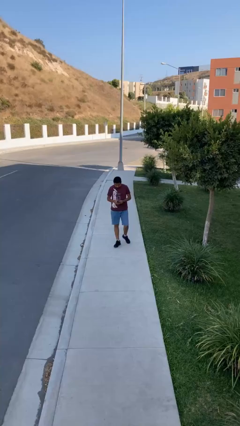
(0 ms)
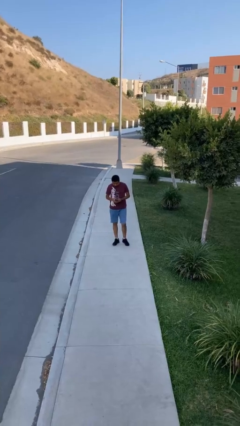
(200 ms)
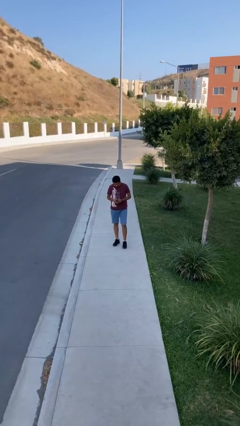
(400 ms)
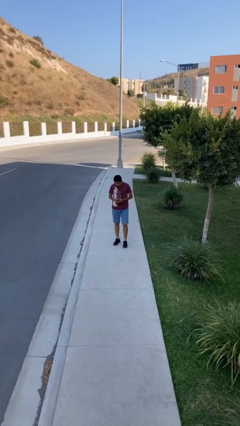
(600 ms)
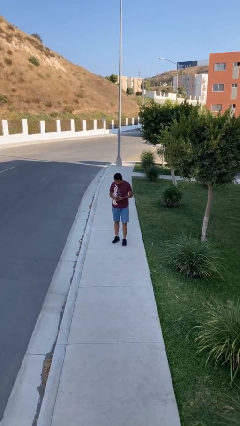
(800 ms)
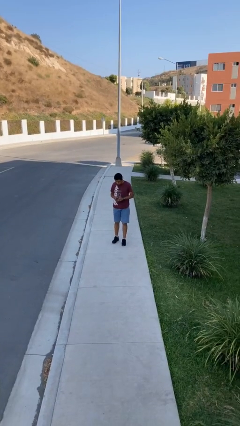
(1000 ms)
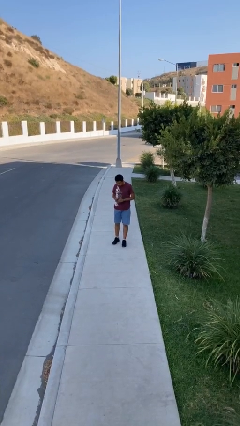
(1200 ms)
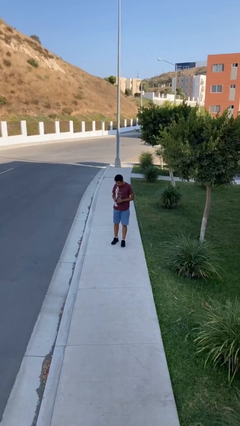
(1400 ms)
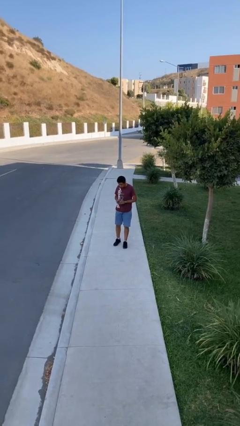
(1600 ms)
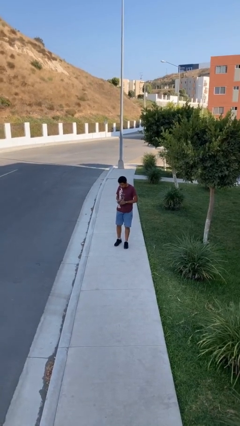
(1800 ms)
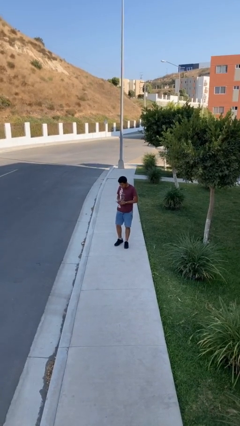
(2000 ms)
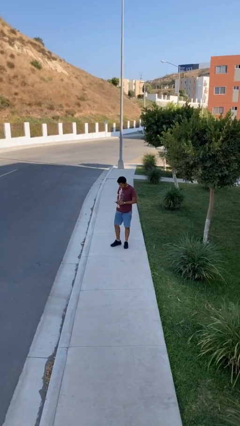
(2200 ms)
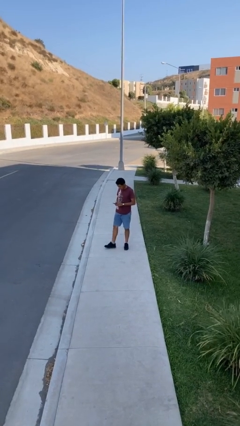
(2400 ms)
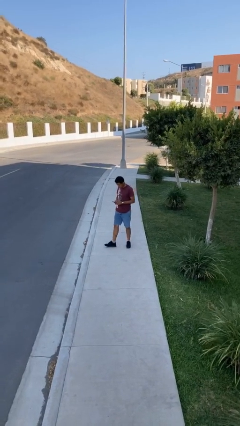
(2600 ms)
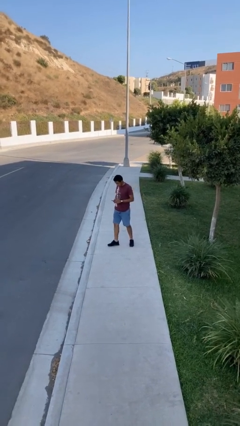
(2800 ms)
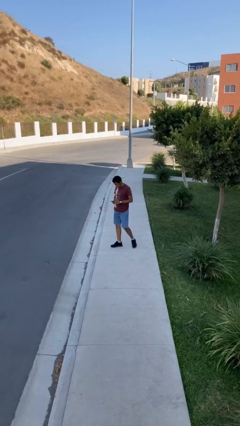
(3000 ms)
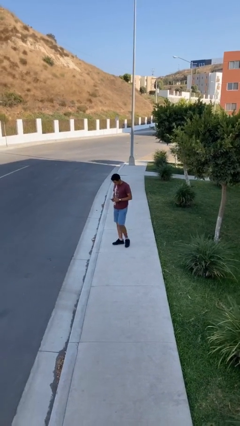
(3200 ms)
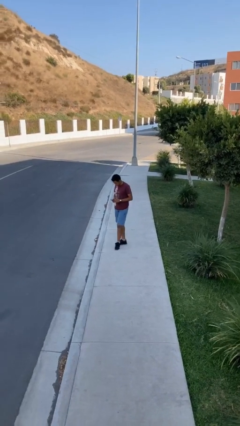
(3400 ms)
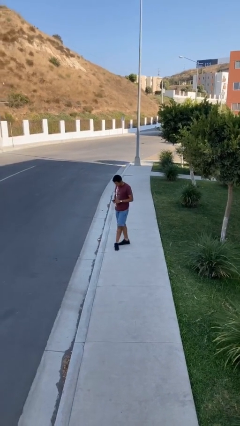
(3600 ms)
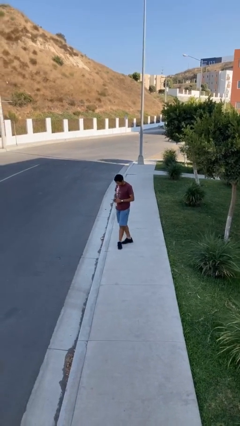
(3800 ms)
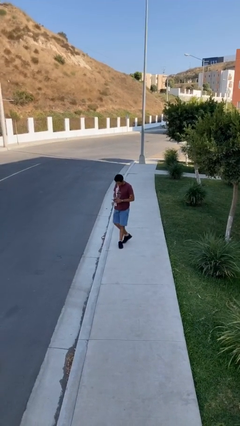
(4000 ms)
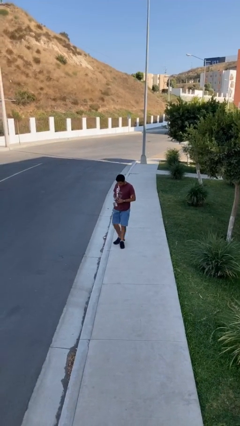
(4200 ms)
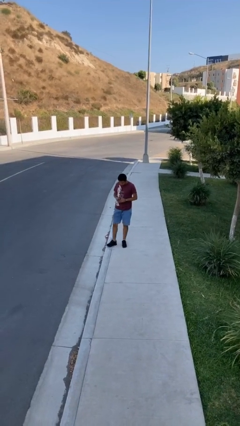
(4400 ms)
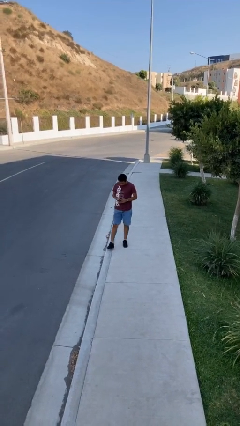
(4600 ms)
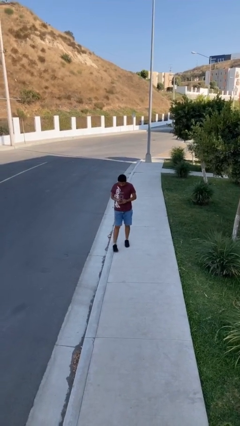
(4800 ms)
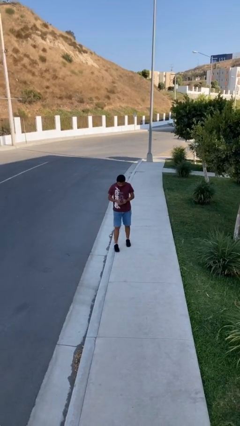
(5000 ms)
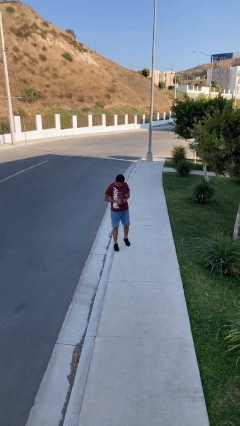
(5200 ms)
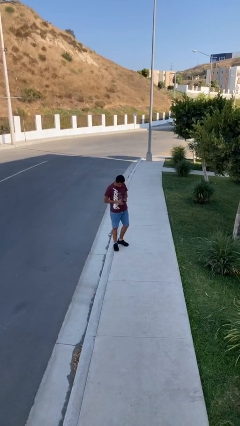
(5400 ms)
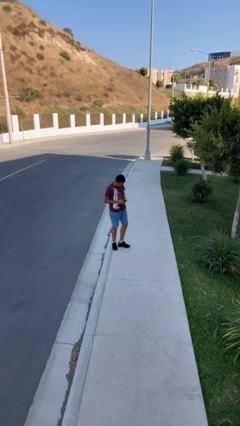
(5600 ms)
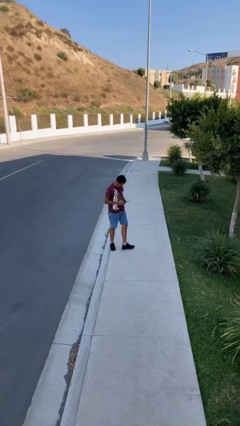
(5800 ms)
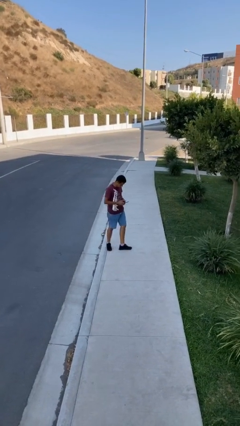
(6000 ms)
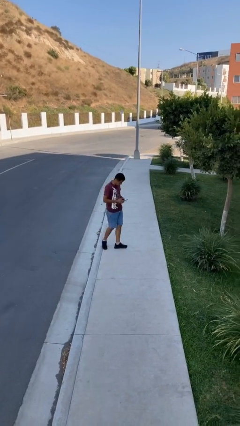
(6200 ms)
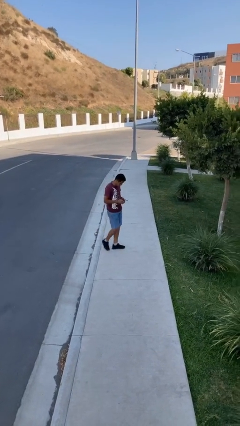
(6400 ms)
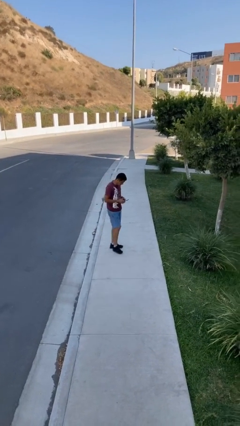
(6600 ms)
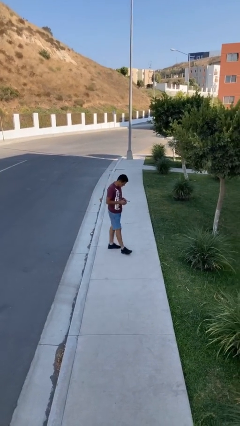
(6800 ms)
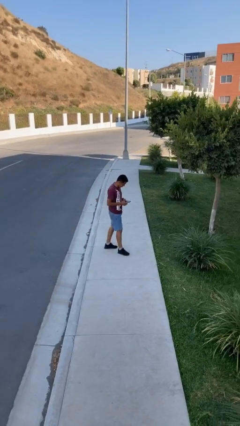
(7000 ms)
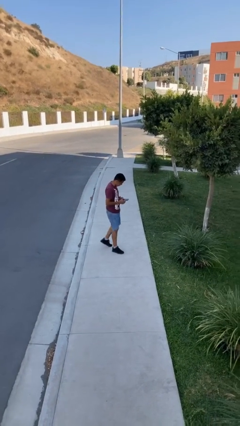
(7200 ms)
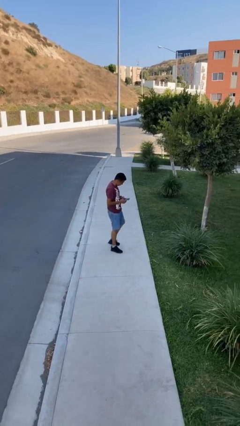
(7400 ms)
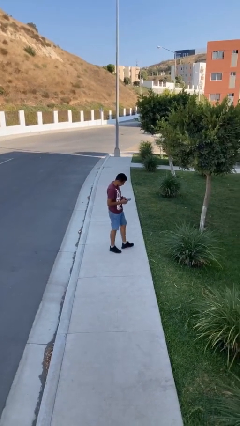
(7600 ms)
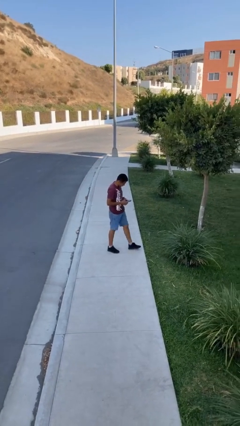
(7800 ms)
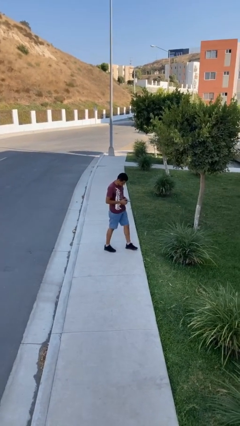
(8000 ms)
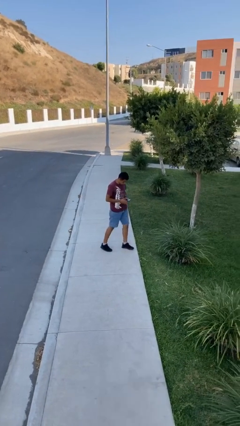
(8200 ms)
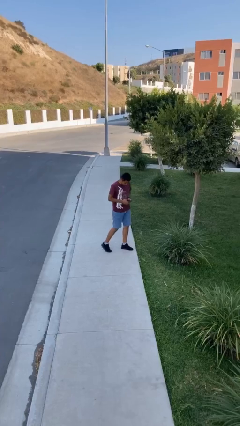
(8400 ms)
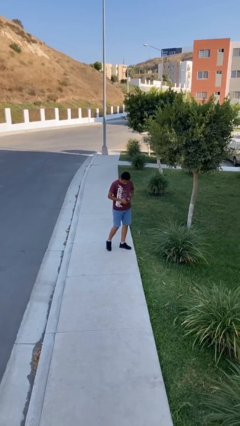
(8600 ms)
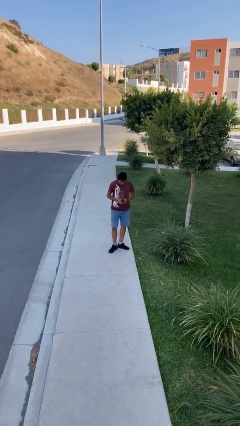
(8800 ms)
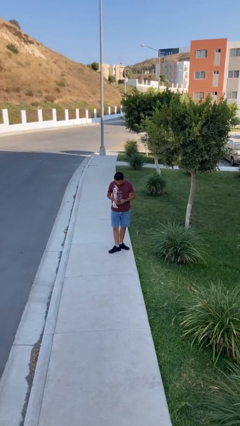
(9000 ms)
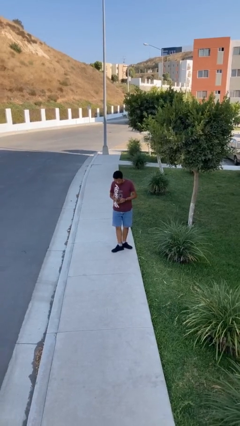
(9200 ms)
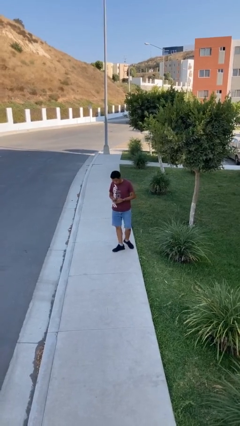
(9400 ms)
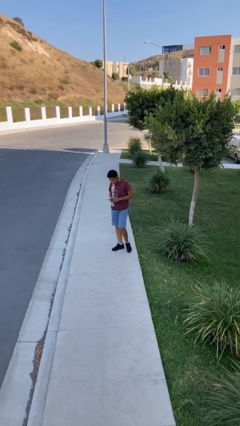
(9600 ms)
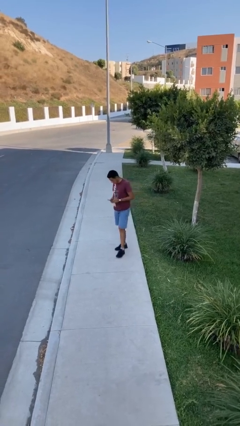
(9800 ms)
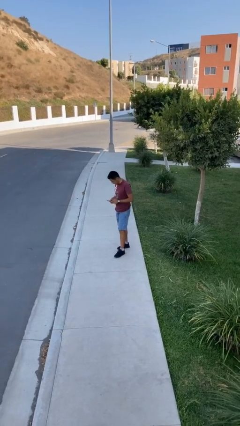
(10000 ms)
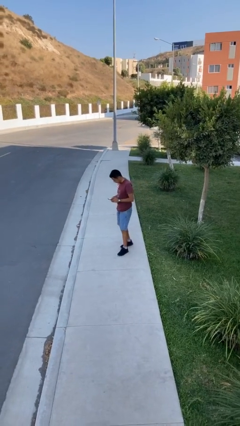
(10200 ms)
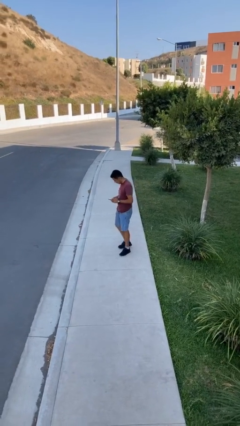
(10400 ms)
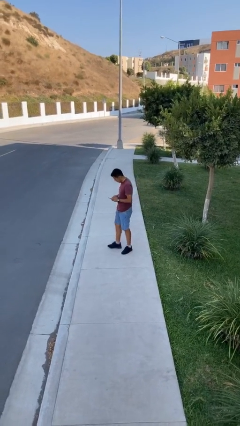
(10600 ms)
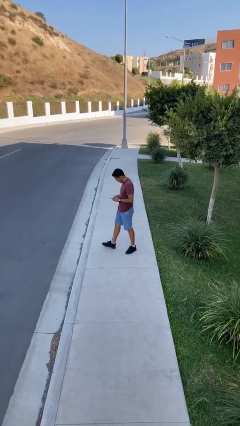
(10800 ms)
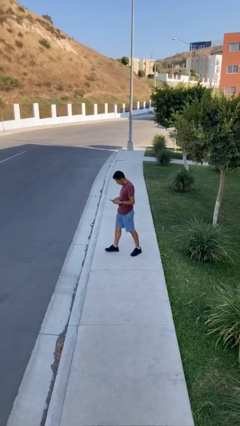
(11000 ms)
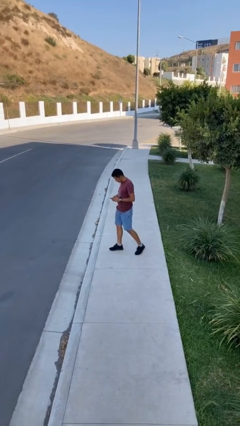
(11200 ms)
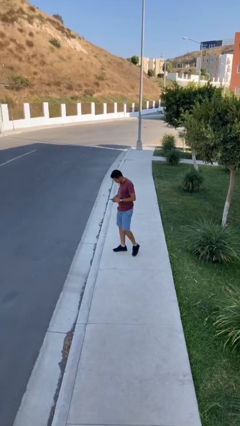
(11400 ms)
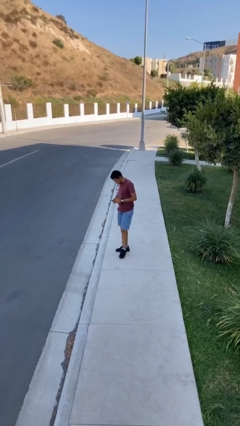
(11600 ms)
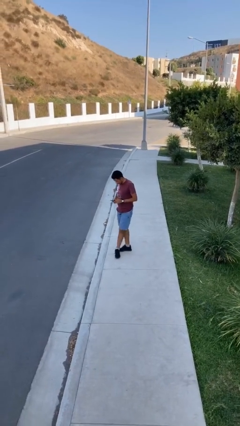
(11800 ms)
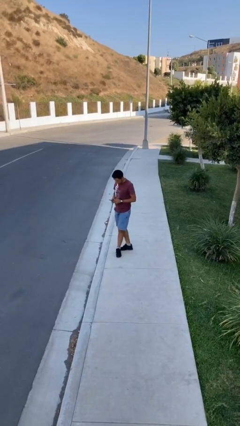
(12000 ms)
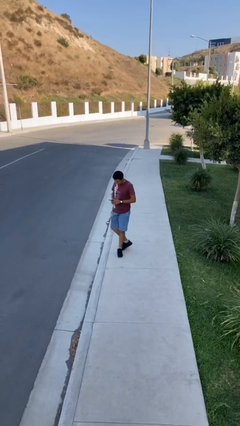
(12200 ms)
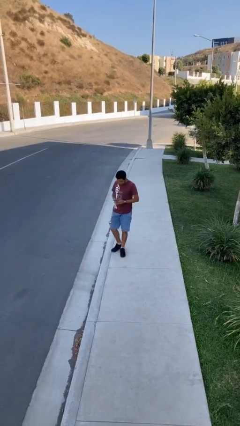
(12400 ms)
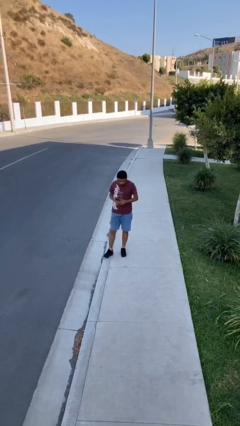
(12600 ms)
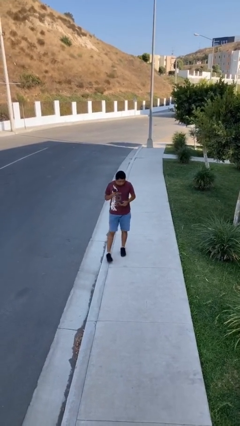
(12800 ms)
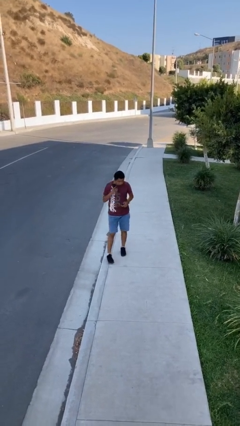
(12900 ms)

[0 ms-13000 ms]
person texts on phone

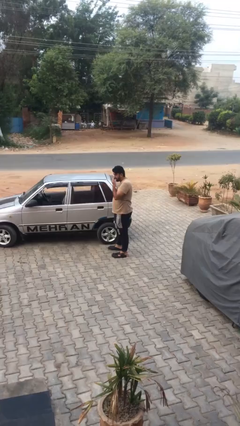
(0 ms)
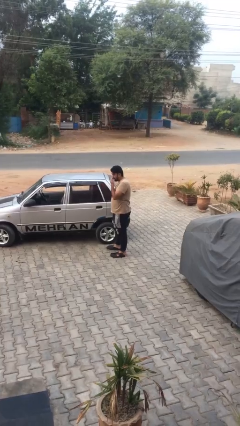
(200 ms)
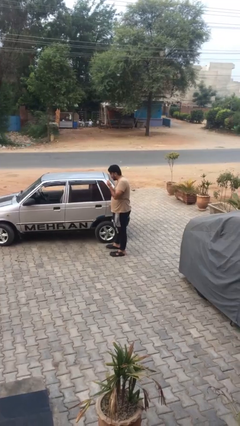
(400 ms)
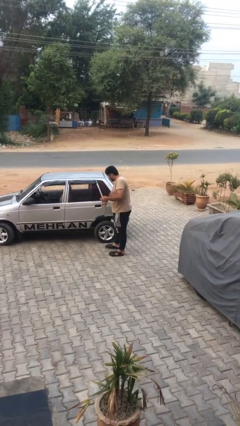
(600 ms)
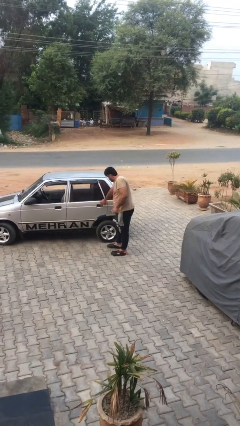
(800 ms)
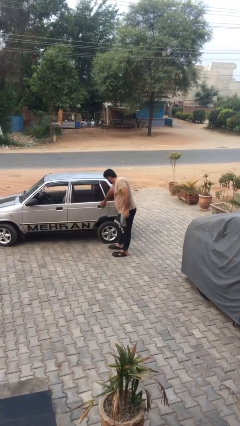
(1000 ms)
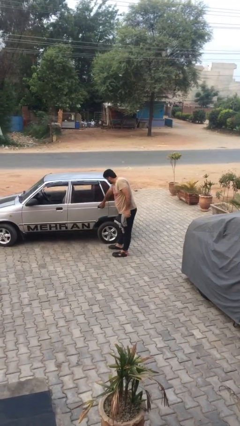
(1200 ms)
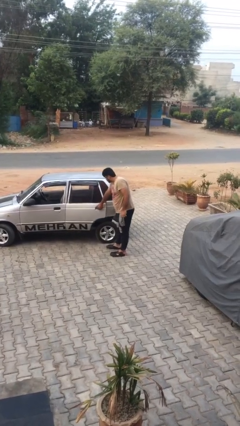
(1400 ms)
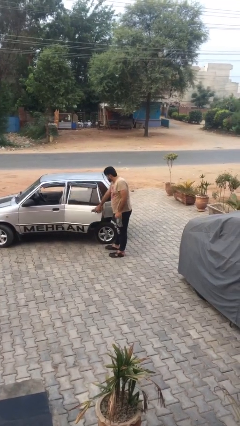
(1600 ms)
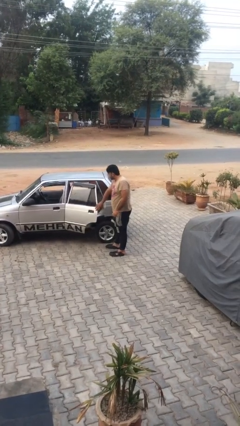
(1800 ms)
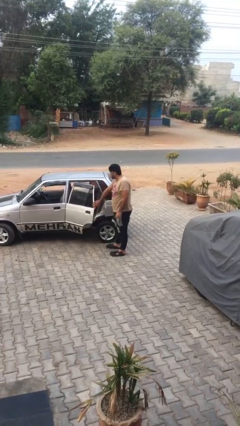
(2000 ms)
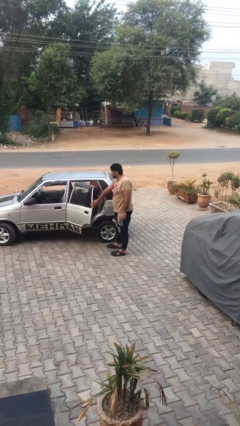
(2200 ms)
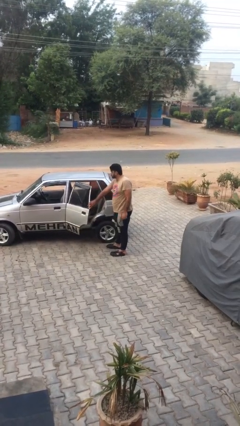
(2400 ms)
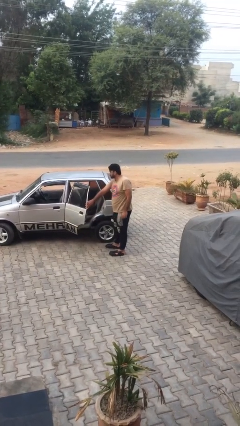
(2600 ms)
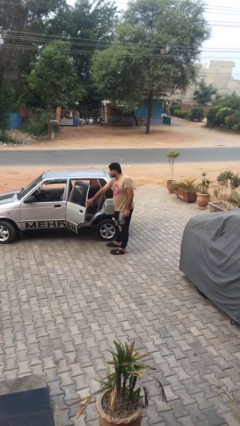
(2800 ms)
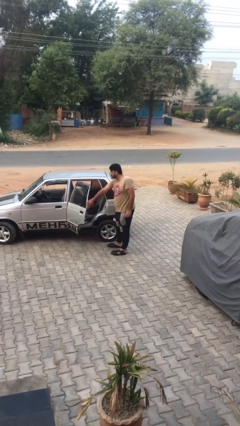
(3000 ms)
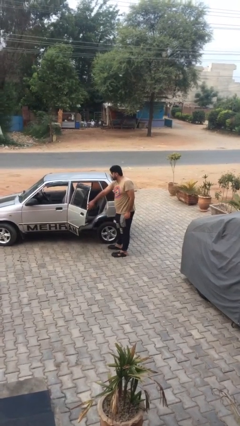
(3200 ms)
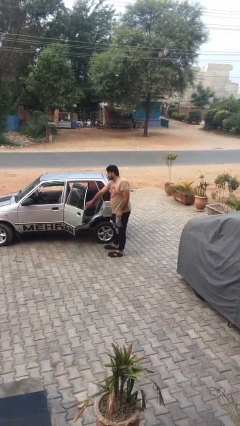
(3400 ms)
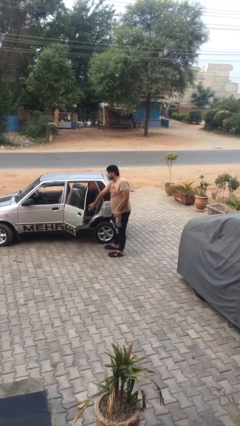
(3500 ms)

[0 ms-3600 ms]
person opens car door

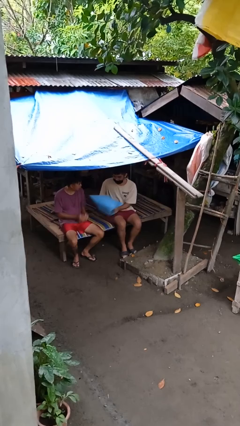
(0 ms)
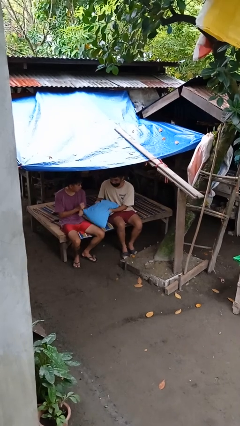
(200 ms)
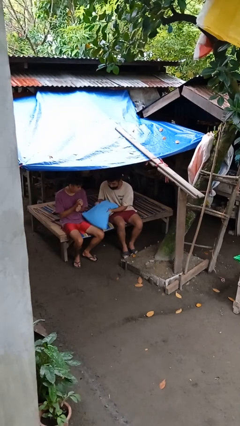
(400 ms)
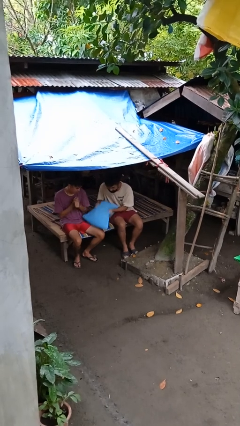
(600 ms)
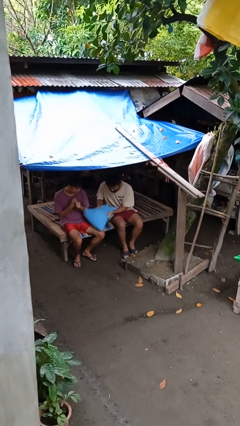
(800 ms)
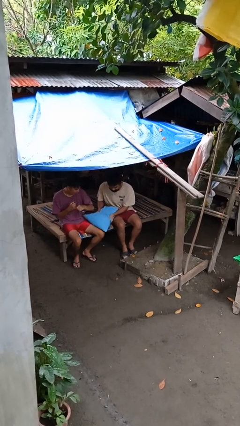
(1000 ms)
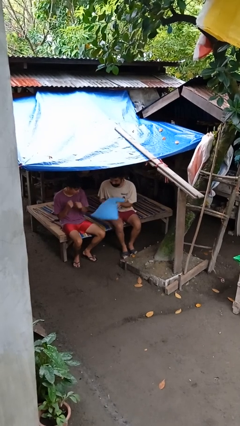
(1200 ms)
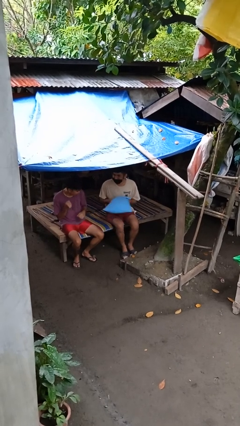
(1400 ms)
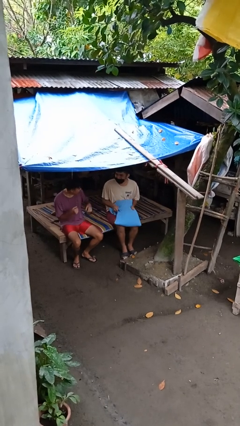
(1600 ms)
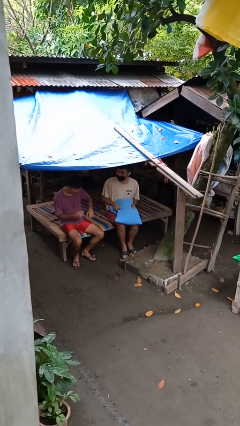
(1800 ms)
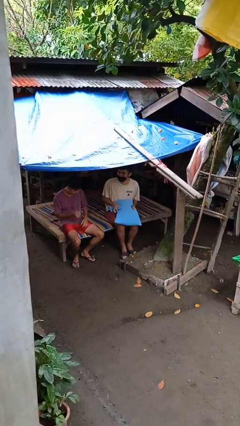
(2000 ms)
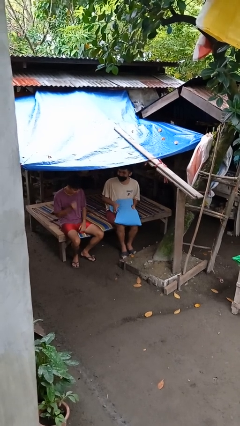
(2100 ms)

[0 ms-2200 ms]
person hits person with pillow
